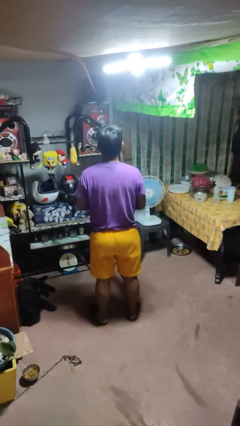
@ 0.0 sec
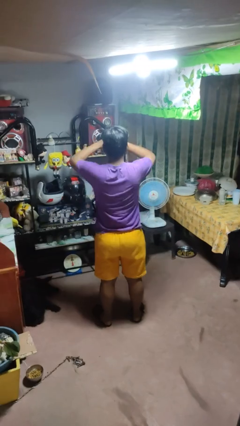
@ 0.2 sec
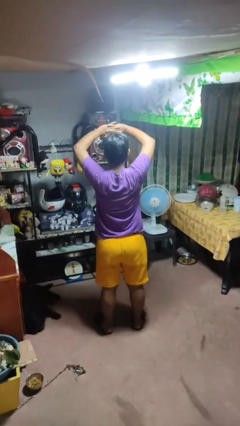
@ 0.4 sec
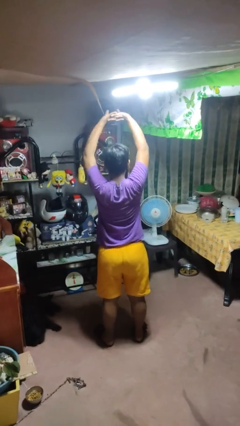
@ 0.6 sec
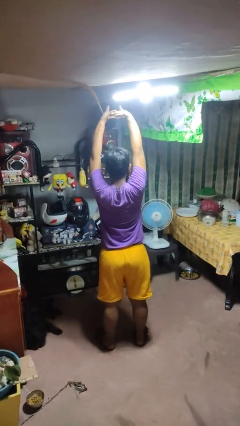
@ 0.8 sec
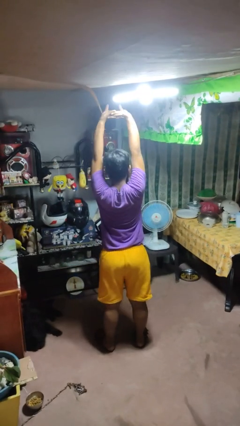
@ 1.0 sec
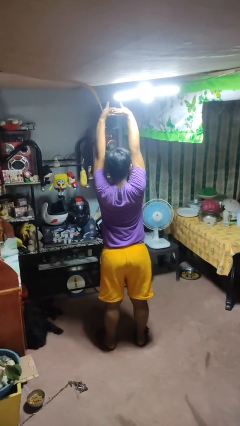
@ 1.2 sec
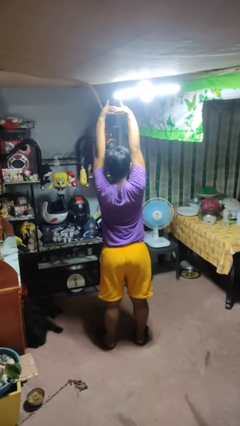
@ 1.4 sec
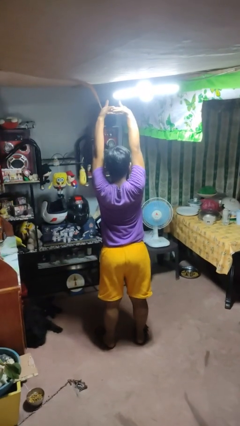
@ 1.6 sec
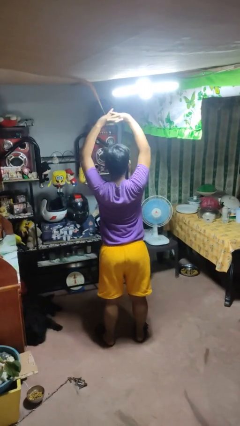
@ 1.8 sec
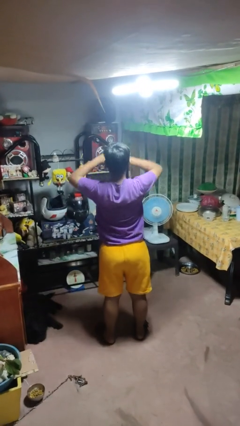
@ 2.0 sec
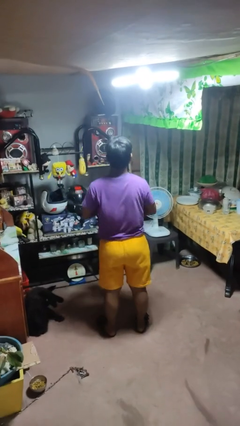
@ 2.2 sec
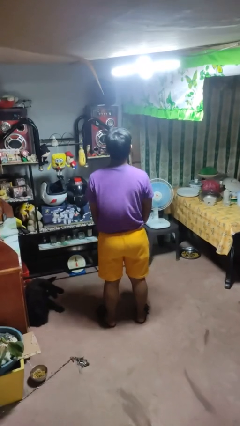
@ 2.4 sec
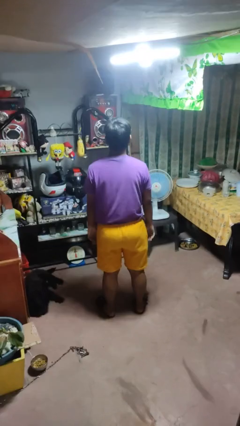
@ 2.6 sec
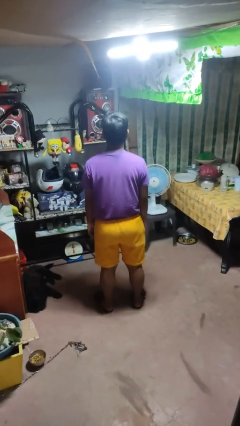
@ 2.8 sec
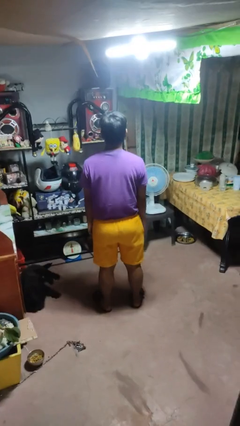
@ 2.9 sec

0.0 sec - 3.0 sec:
person stretches arms over head

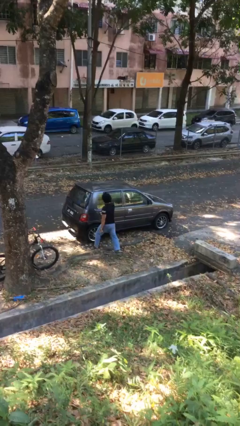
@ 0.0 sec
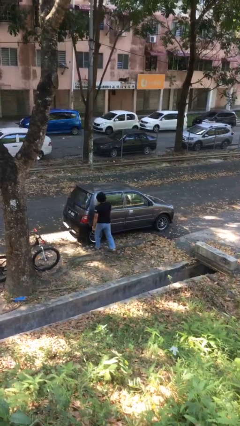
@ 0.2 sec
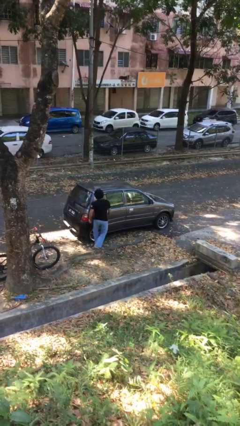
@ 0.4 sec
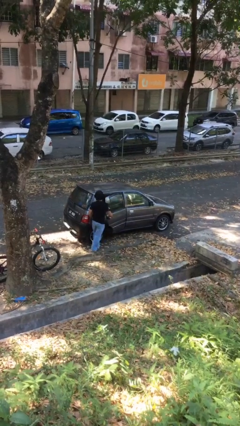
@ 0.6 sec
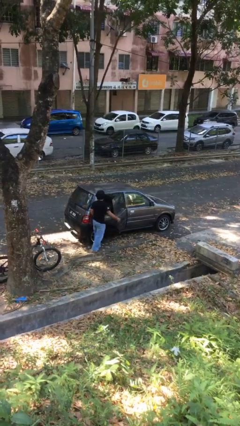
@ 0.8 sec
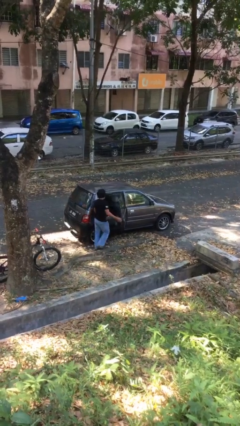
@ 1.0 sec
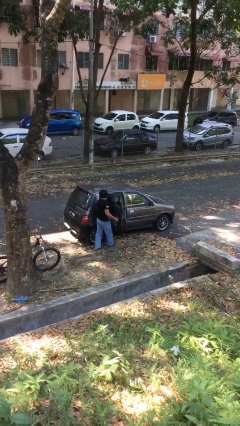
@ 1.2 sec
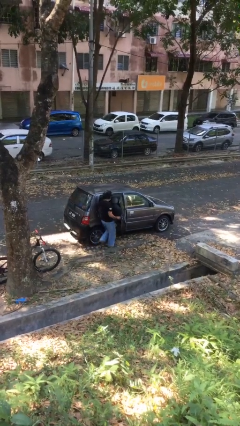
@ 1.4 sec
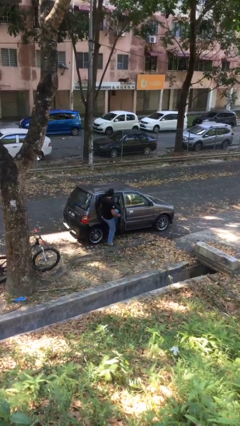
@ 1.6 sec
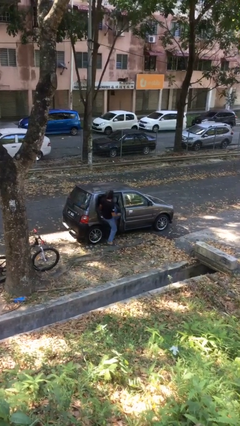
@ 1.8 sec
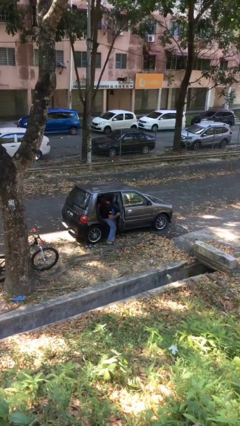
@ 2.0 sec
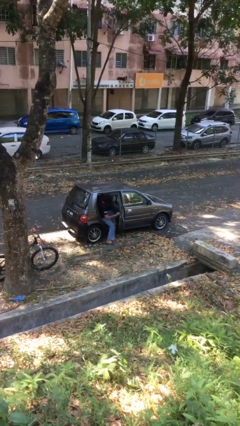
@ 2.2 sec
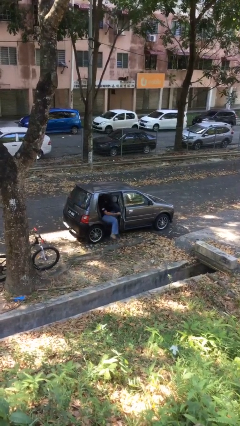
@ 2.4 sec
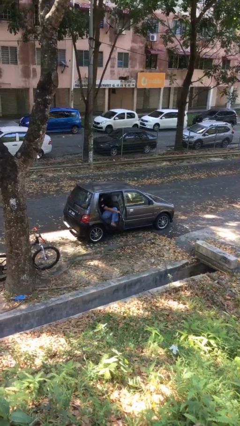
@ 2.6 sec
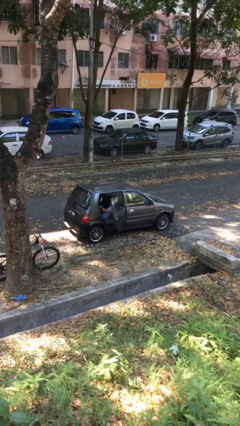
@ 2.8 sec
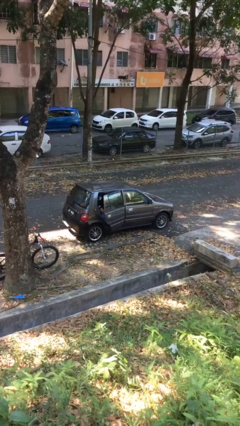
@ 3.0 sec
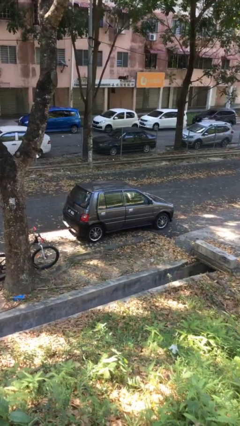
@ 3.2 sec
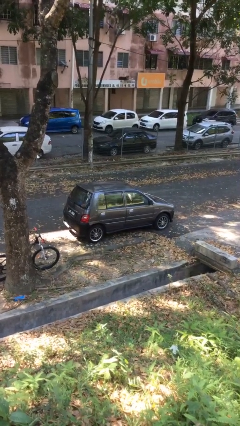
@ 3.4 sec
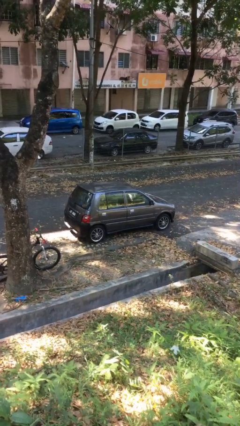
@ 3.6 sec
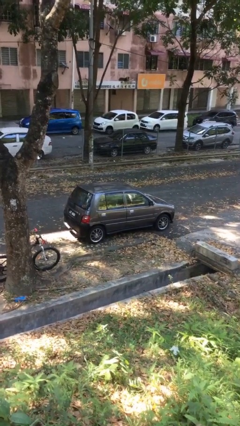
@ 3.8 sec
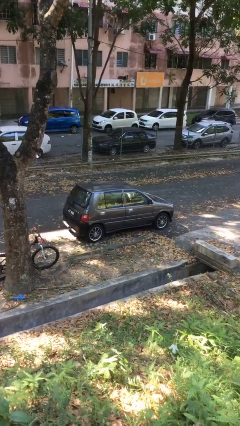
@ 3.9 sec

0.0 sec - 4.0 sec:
car picks up person

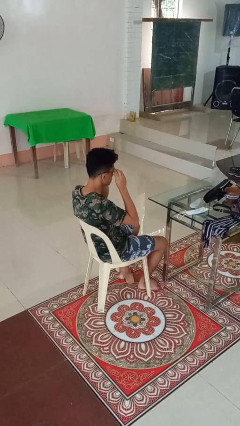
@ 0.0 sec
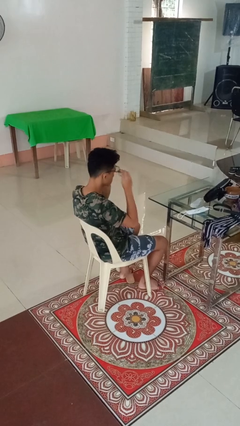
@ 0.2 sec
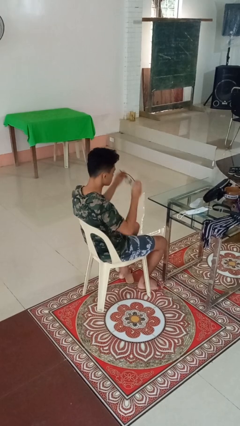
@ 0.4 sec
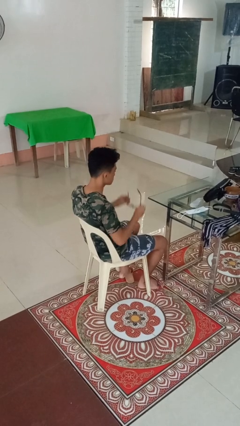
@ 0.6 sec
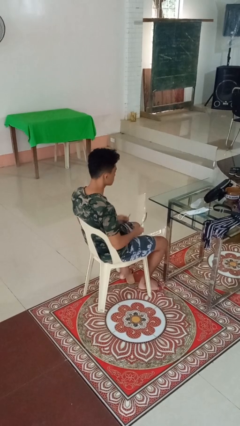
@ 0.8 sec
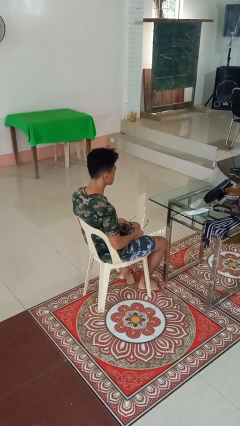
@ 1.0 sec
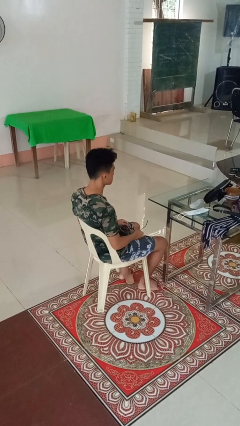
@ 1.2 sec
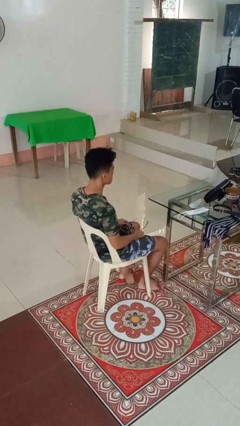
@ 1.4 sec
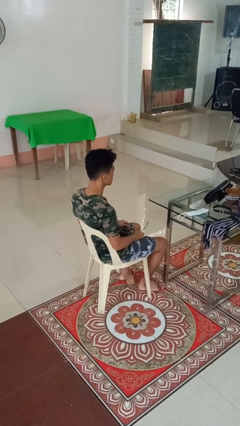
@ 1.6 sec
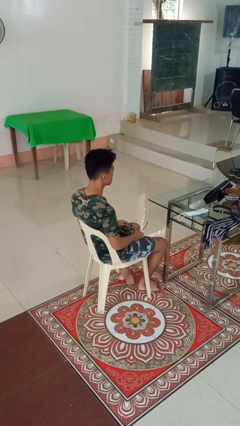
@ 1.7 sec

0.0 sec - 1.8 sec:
person takes off glasses

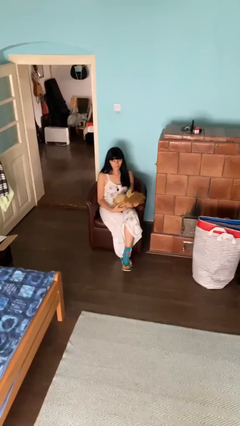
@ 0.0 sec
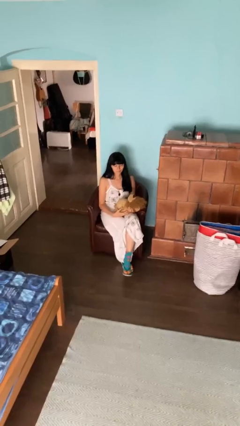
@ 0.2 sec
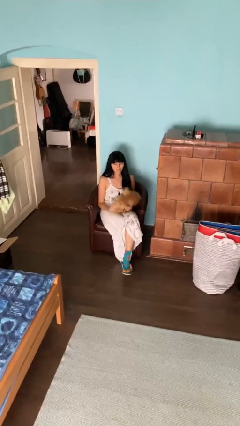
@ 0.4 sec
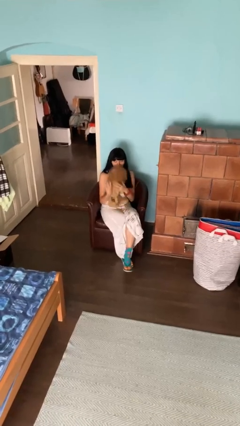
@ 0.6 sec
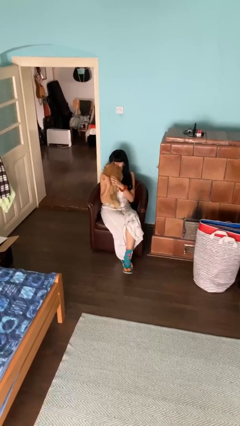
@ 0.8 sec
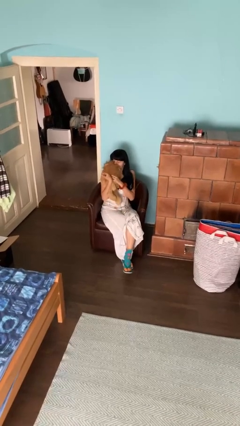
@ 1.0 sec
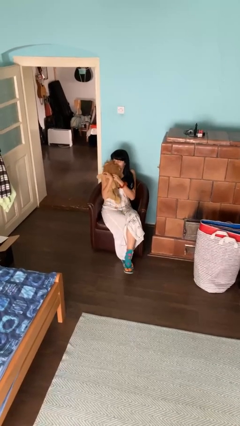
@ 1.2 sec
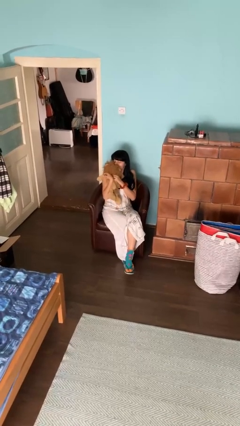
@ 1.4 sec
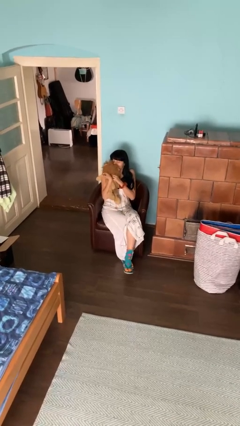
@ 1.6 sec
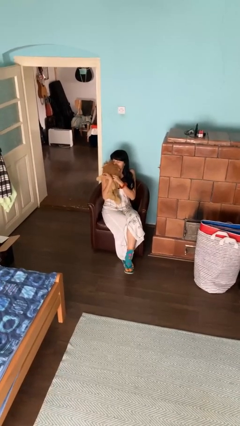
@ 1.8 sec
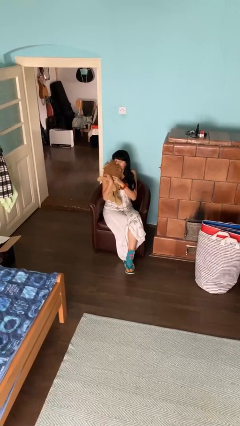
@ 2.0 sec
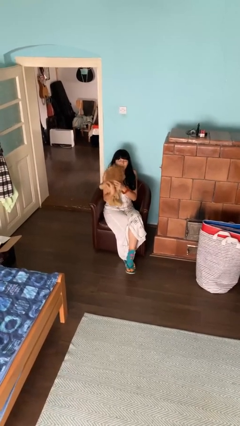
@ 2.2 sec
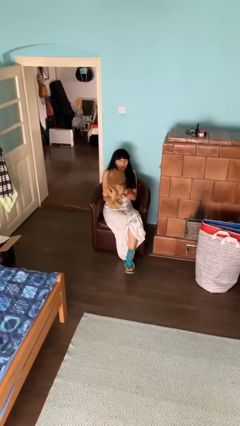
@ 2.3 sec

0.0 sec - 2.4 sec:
person hugs stuffed animal

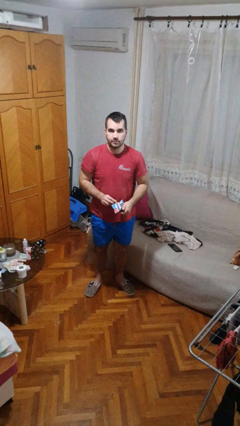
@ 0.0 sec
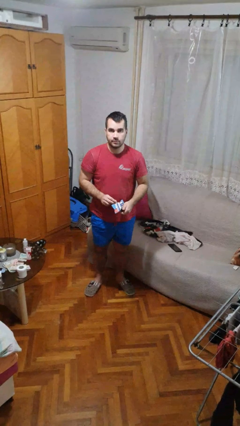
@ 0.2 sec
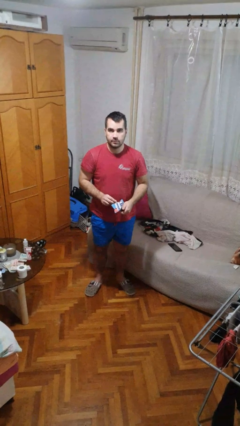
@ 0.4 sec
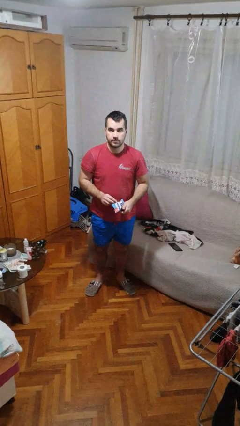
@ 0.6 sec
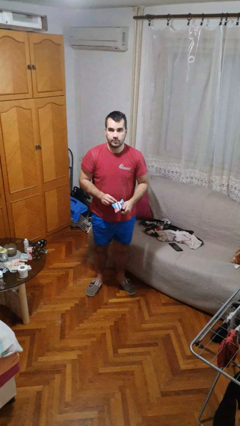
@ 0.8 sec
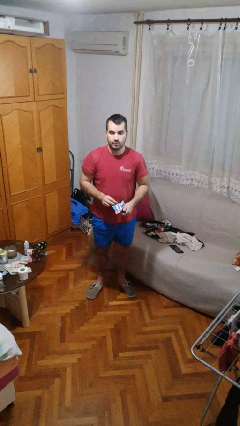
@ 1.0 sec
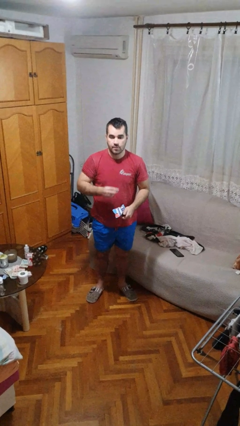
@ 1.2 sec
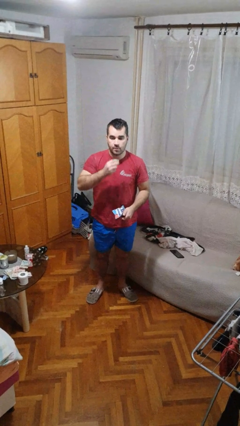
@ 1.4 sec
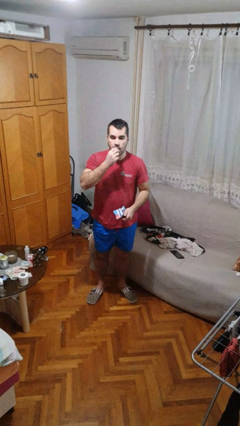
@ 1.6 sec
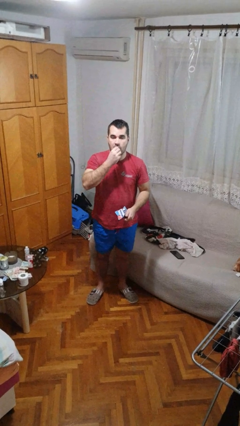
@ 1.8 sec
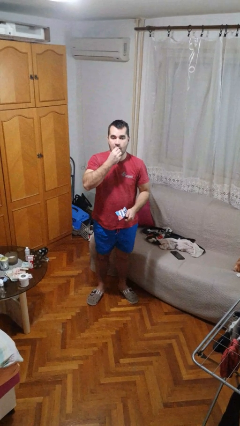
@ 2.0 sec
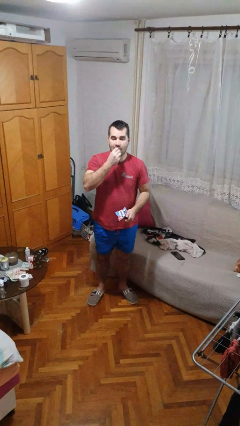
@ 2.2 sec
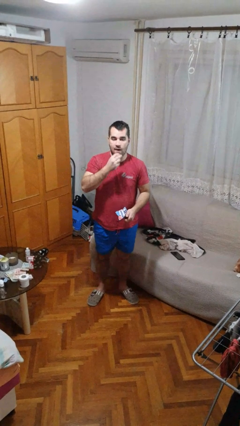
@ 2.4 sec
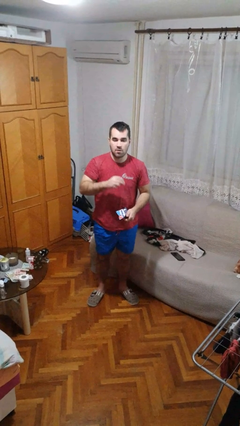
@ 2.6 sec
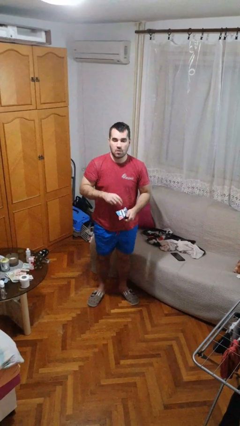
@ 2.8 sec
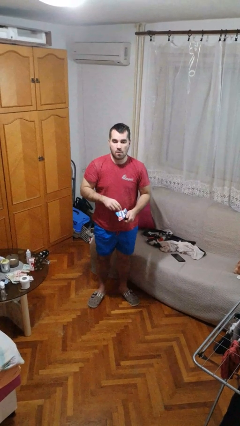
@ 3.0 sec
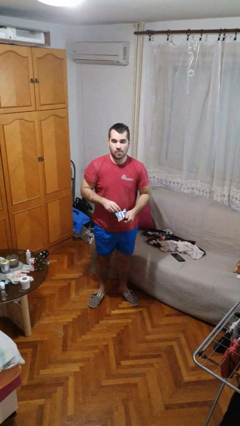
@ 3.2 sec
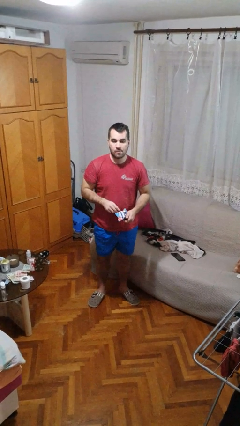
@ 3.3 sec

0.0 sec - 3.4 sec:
person eats snack from bag

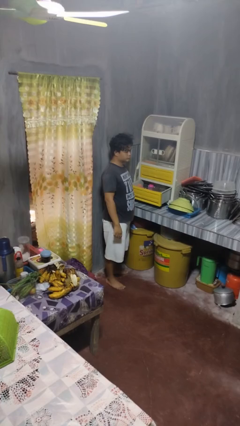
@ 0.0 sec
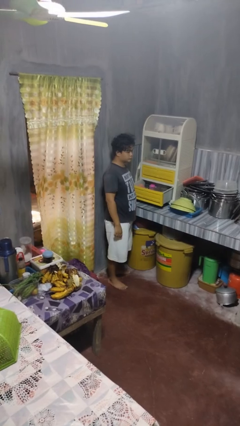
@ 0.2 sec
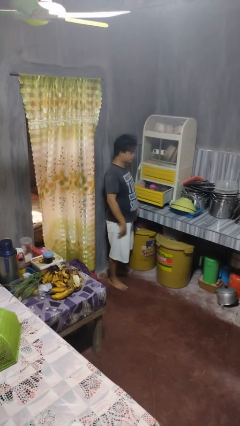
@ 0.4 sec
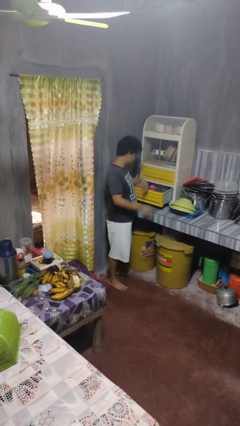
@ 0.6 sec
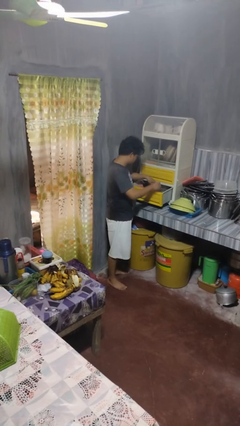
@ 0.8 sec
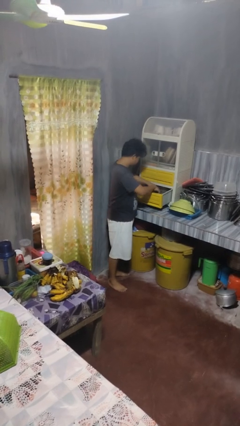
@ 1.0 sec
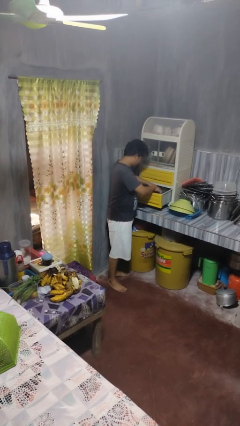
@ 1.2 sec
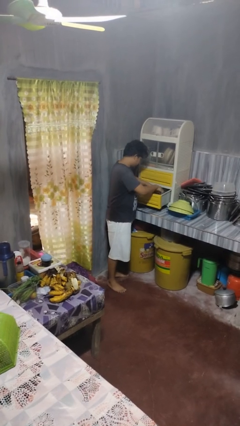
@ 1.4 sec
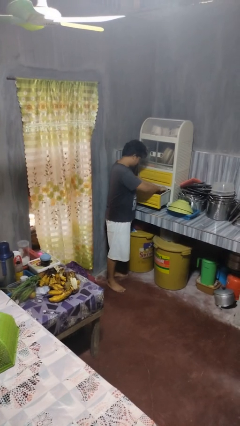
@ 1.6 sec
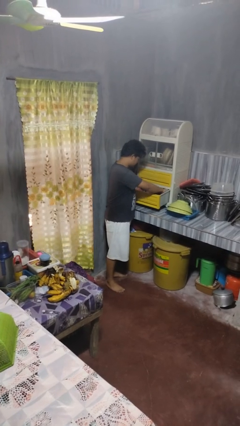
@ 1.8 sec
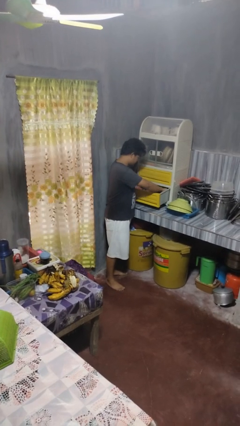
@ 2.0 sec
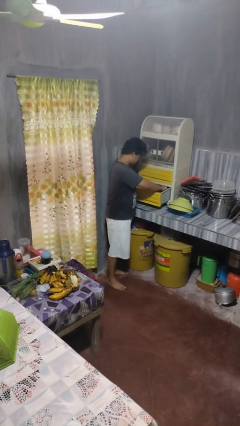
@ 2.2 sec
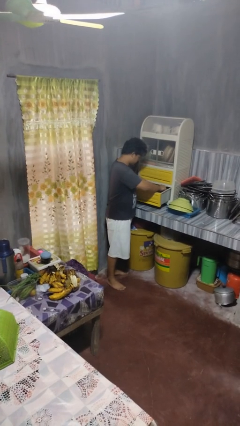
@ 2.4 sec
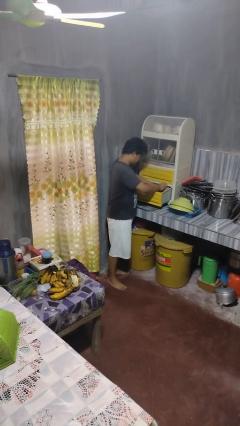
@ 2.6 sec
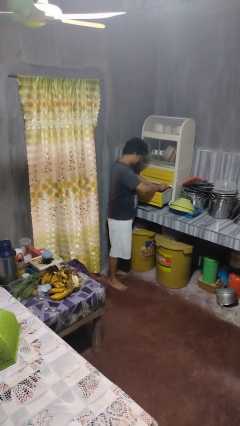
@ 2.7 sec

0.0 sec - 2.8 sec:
person searches in kitchen drawer
